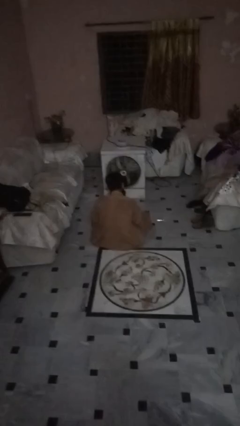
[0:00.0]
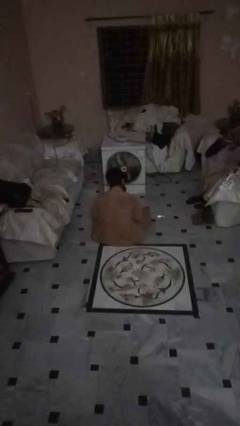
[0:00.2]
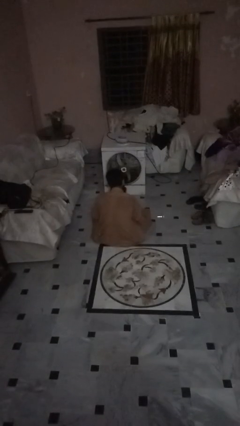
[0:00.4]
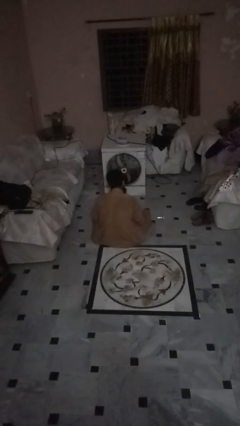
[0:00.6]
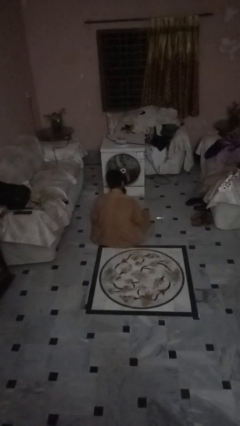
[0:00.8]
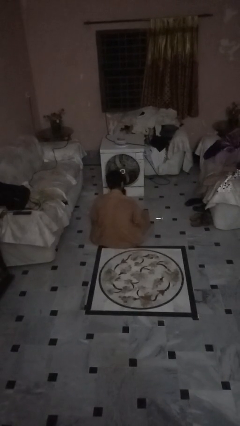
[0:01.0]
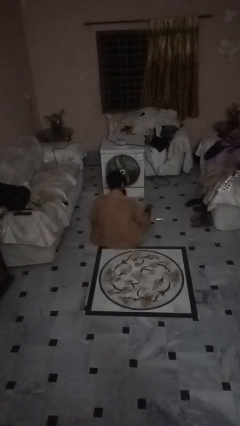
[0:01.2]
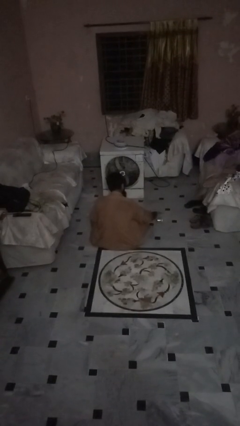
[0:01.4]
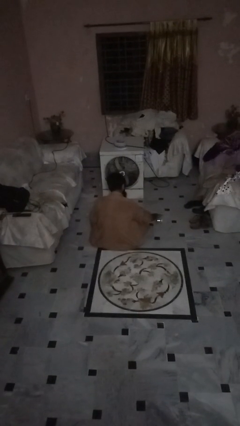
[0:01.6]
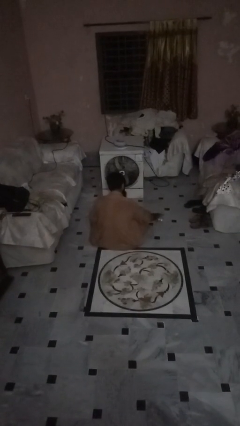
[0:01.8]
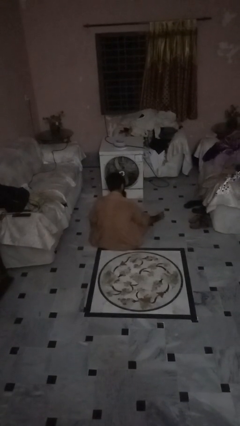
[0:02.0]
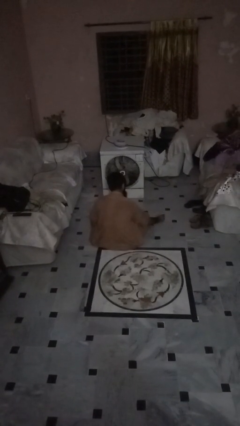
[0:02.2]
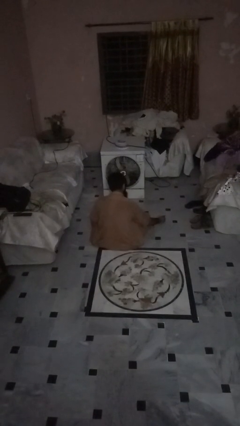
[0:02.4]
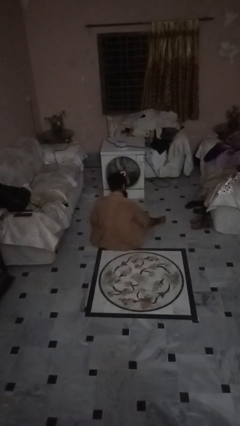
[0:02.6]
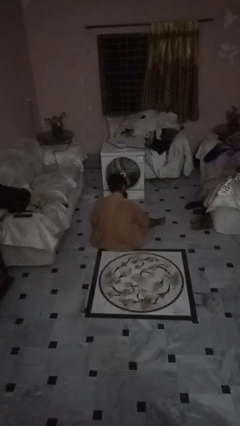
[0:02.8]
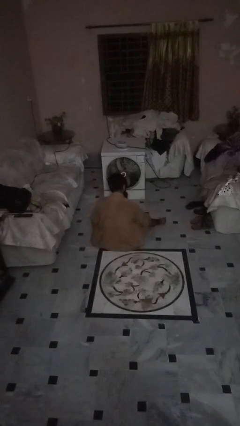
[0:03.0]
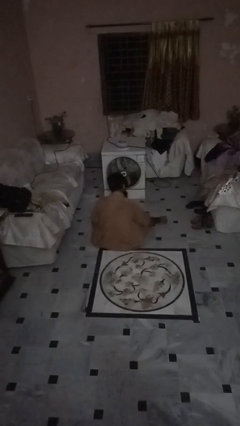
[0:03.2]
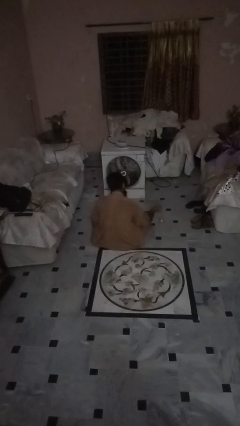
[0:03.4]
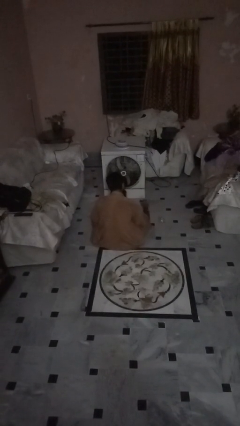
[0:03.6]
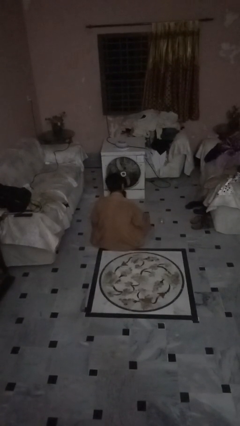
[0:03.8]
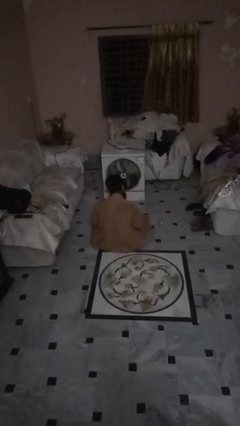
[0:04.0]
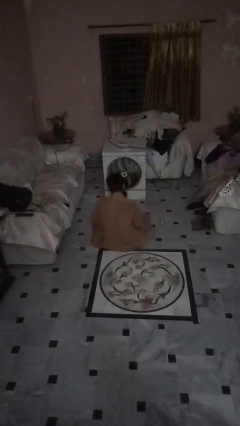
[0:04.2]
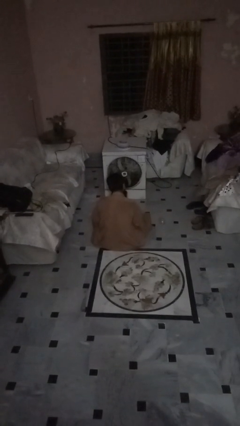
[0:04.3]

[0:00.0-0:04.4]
person sets upright glass

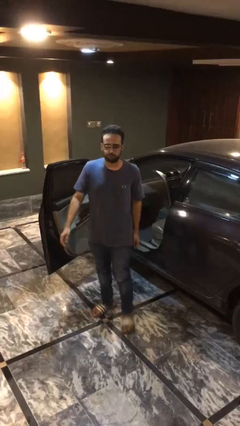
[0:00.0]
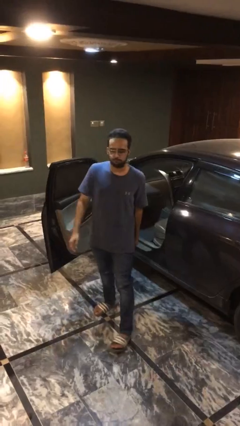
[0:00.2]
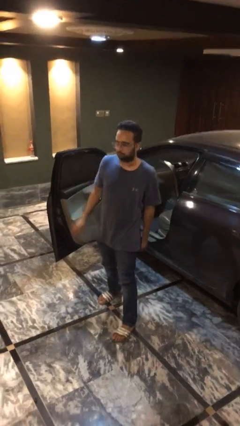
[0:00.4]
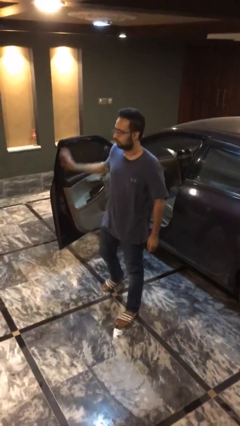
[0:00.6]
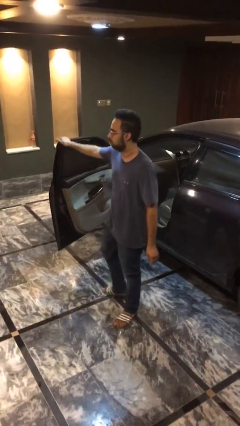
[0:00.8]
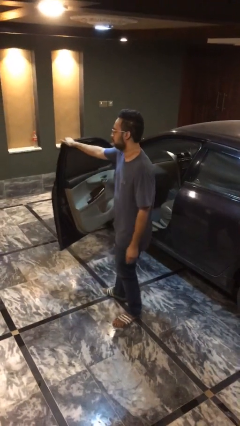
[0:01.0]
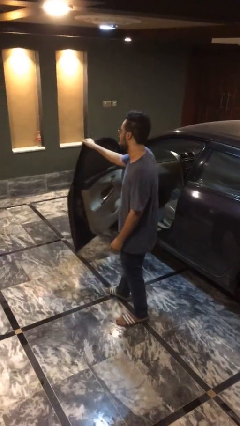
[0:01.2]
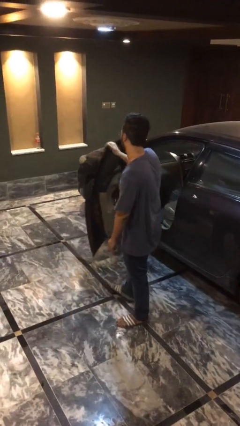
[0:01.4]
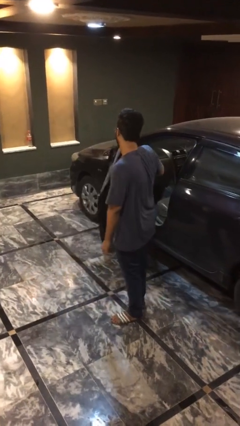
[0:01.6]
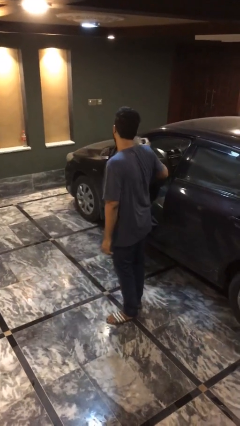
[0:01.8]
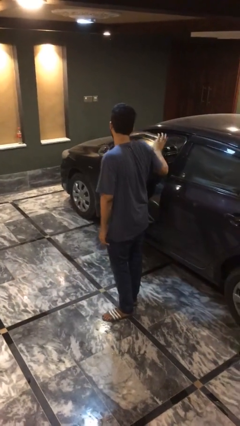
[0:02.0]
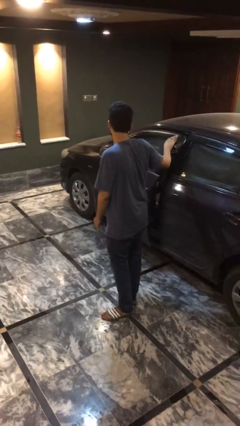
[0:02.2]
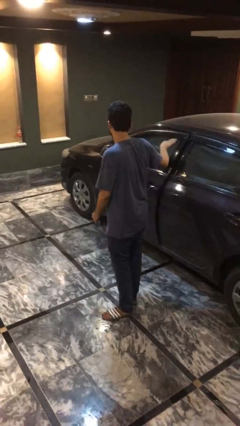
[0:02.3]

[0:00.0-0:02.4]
person closes car door

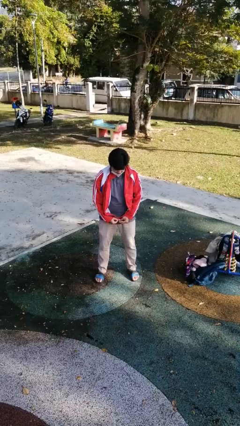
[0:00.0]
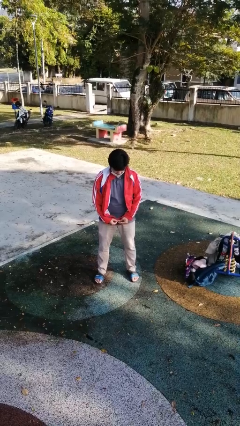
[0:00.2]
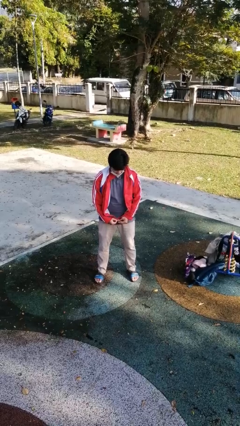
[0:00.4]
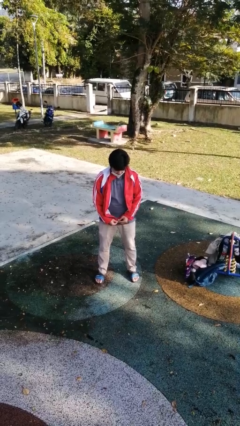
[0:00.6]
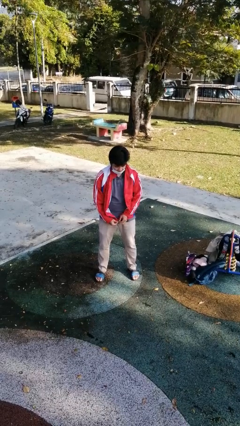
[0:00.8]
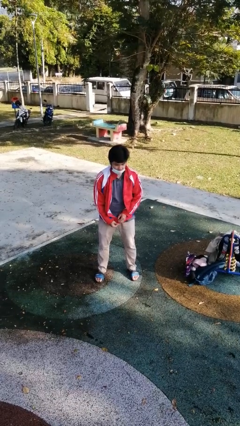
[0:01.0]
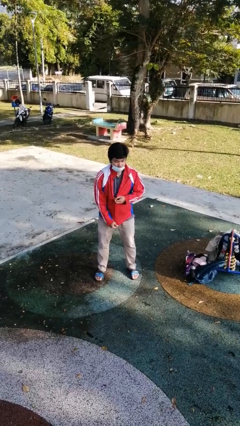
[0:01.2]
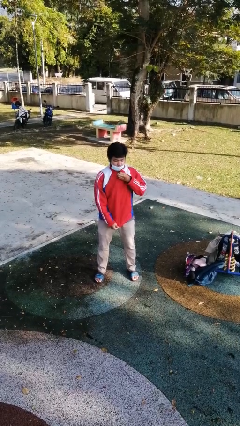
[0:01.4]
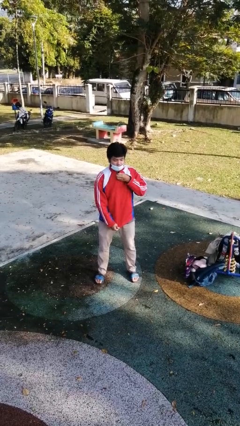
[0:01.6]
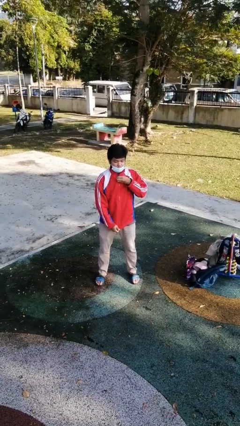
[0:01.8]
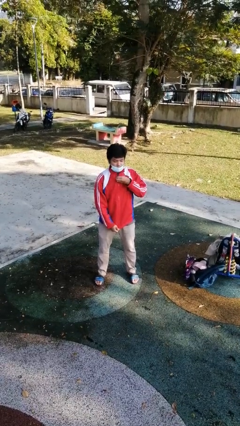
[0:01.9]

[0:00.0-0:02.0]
person zips up jacket

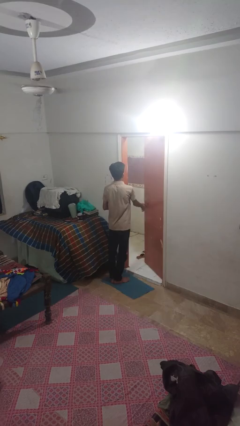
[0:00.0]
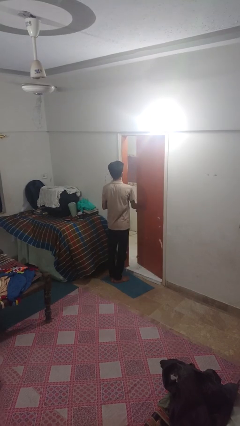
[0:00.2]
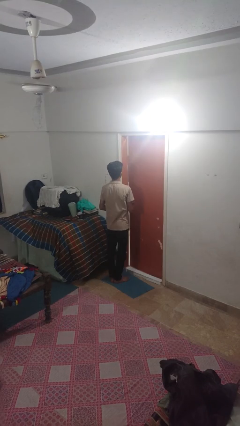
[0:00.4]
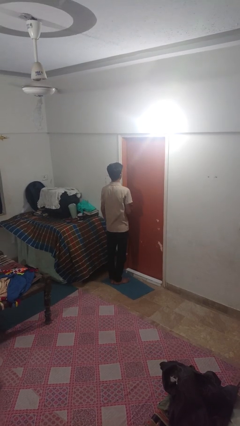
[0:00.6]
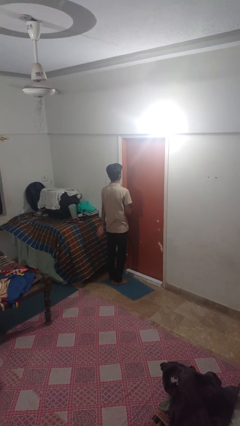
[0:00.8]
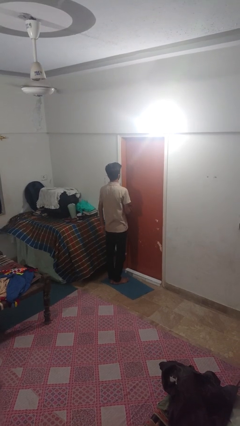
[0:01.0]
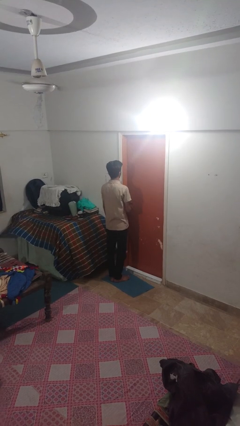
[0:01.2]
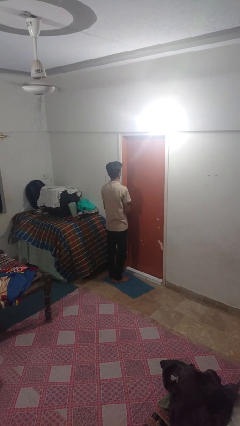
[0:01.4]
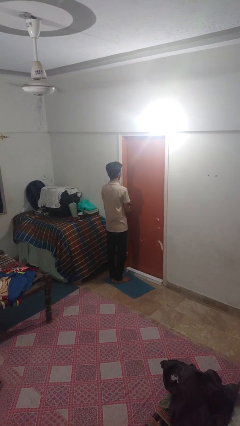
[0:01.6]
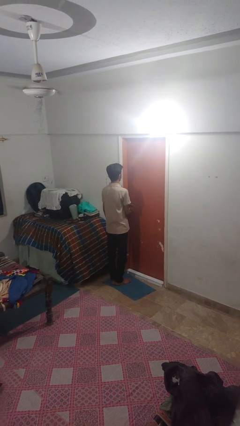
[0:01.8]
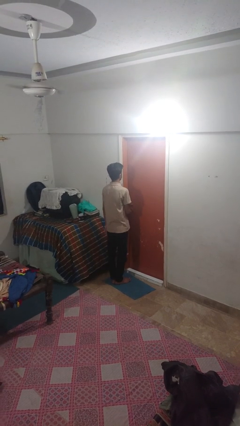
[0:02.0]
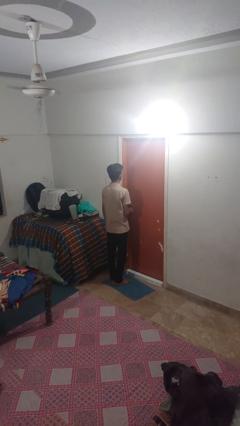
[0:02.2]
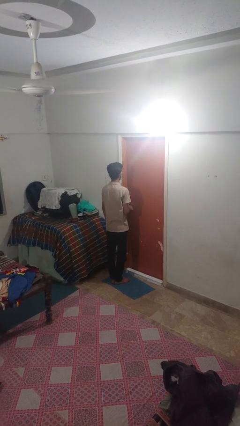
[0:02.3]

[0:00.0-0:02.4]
person closes facility door

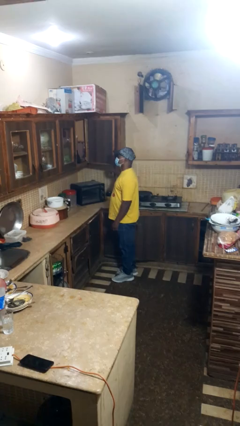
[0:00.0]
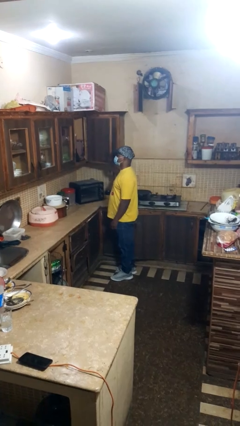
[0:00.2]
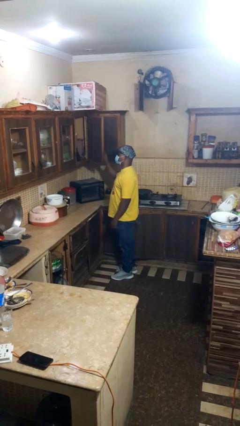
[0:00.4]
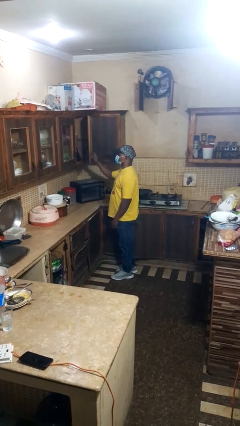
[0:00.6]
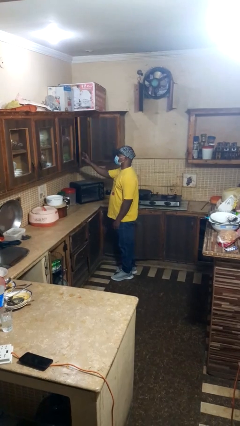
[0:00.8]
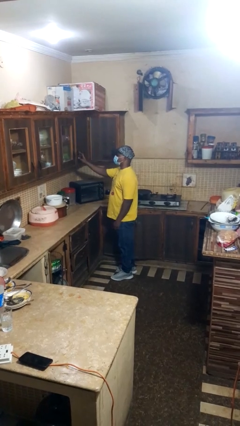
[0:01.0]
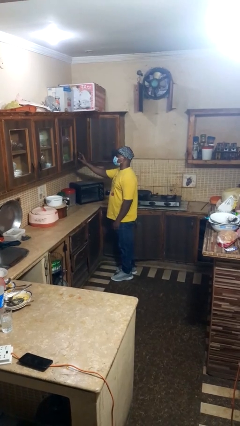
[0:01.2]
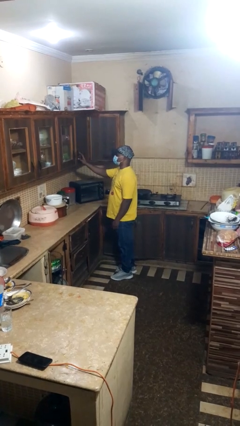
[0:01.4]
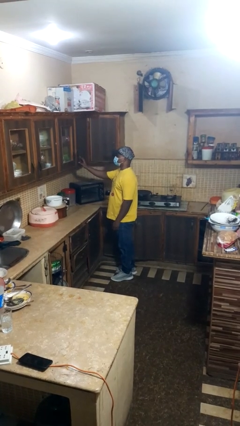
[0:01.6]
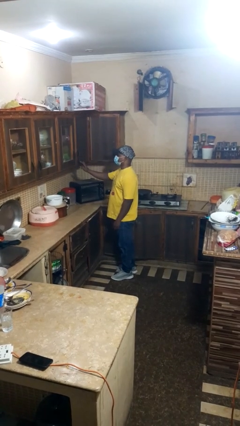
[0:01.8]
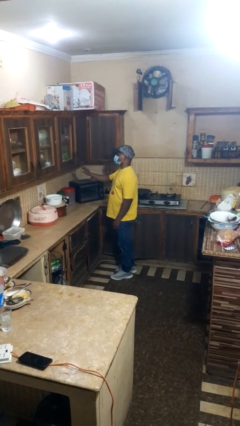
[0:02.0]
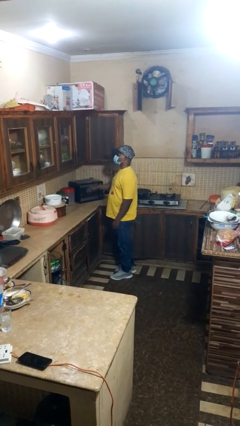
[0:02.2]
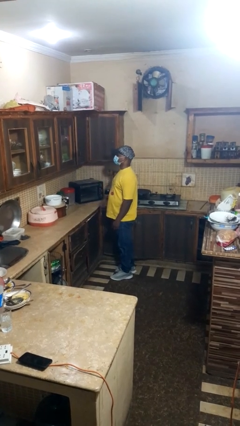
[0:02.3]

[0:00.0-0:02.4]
person closes cabinet

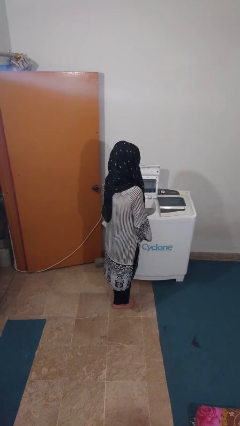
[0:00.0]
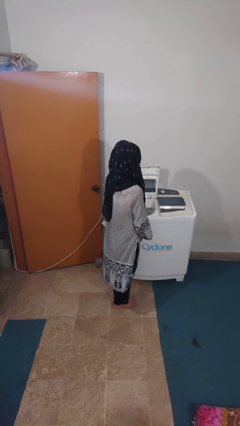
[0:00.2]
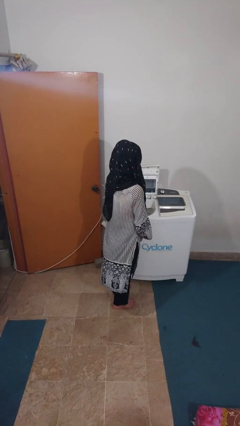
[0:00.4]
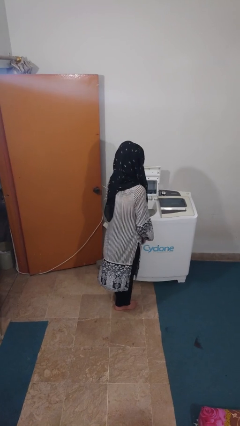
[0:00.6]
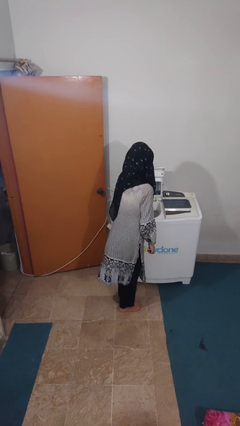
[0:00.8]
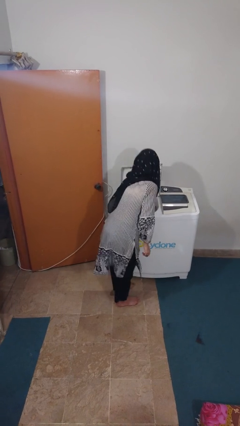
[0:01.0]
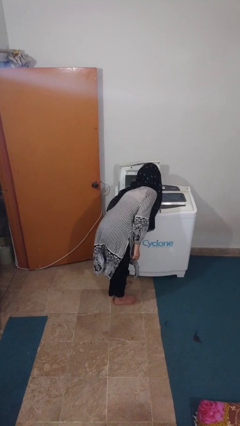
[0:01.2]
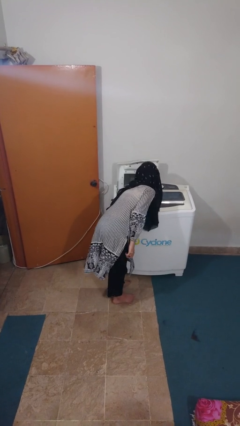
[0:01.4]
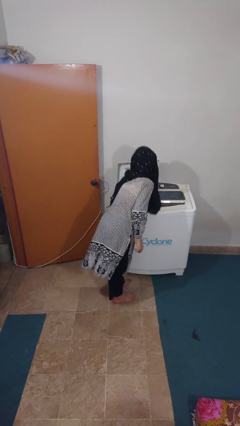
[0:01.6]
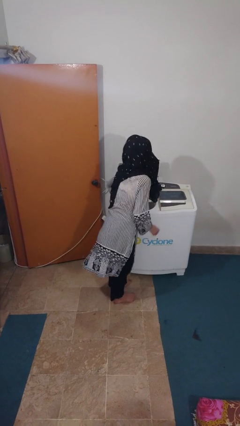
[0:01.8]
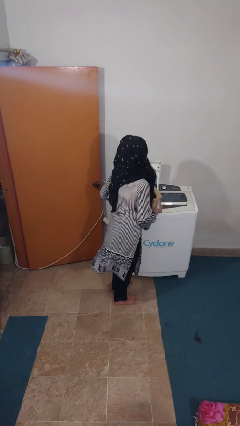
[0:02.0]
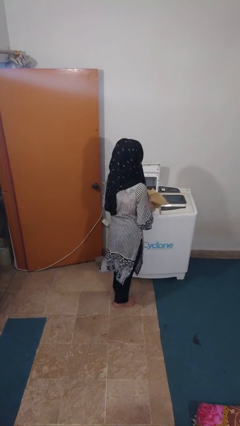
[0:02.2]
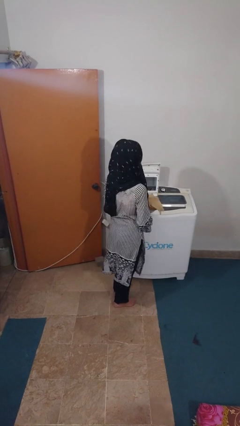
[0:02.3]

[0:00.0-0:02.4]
person unloads clotheswasher

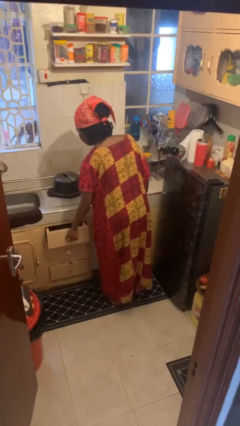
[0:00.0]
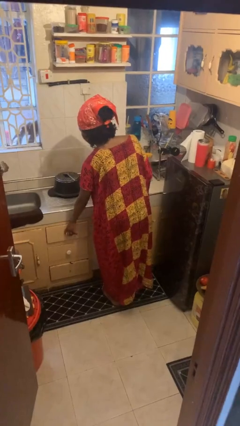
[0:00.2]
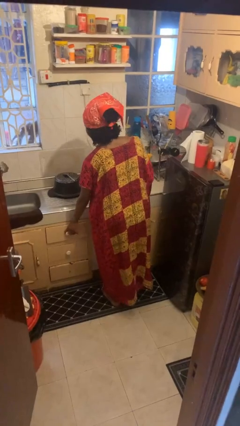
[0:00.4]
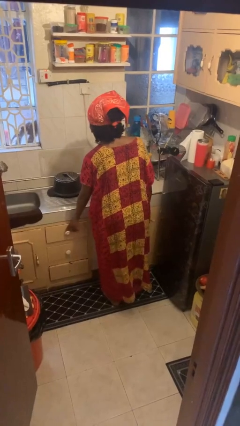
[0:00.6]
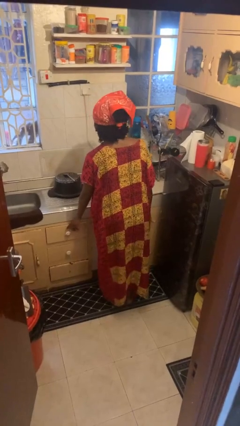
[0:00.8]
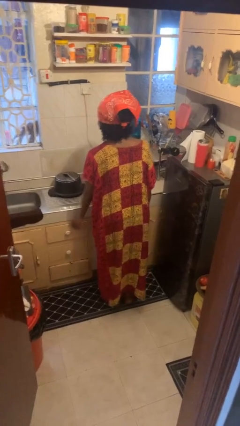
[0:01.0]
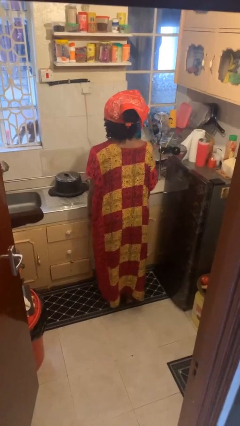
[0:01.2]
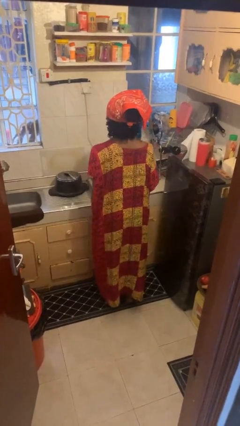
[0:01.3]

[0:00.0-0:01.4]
person closes kitchen drawer
